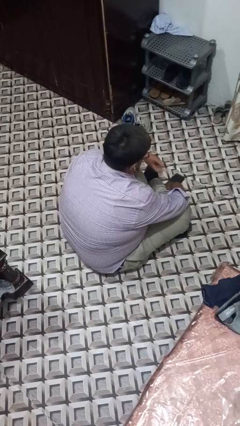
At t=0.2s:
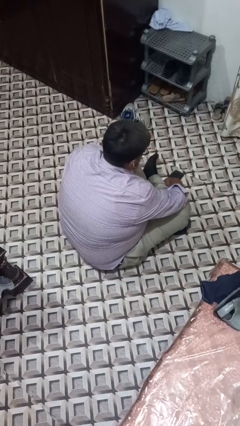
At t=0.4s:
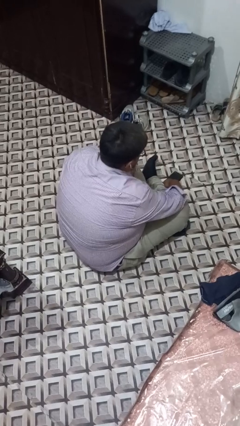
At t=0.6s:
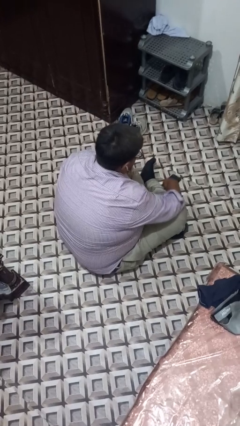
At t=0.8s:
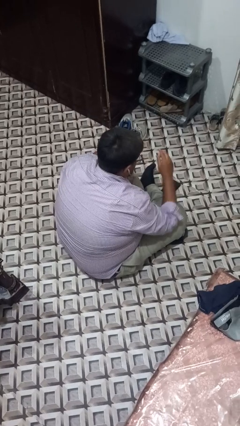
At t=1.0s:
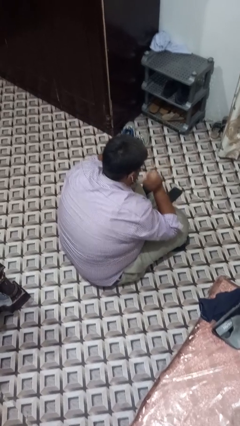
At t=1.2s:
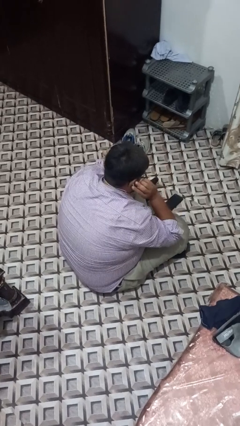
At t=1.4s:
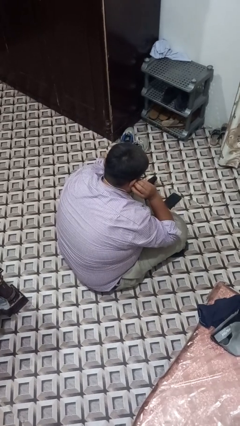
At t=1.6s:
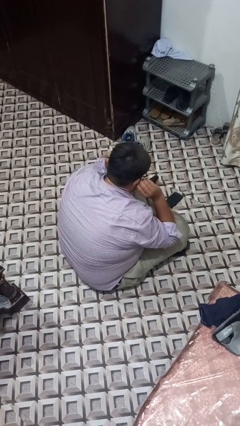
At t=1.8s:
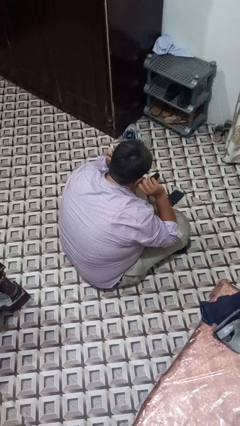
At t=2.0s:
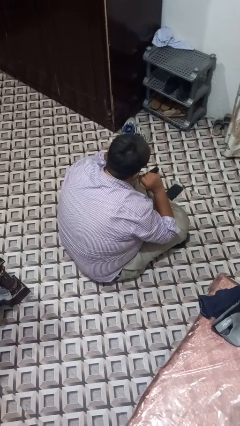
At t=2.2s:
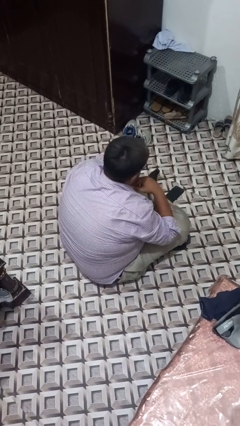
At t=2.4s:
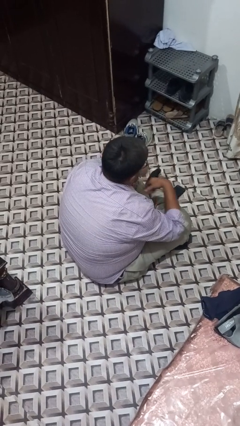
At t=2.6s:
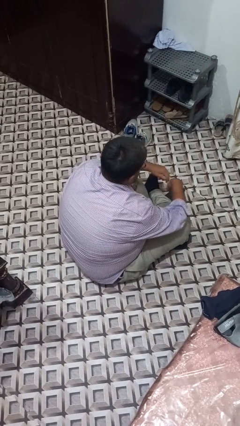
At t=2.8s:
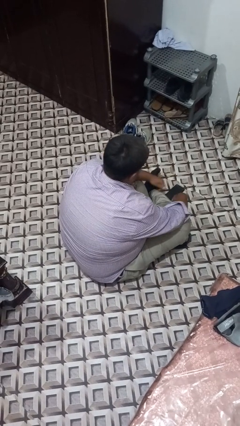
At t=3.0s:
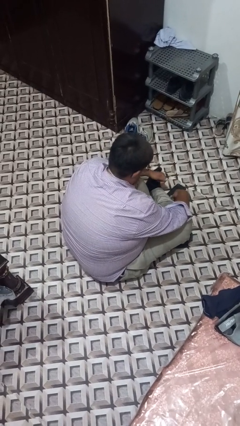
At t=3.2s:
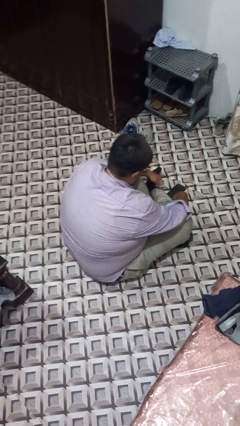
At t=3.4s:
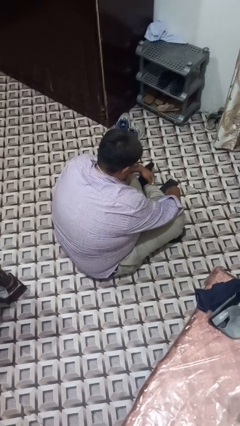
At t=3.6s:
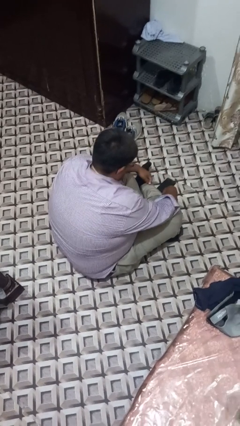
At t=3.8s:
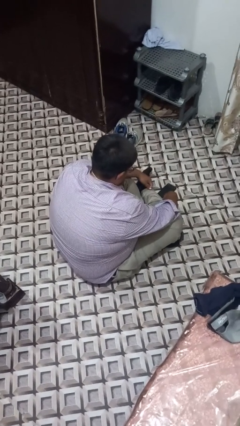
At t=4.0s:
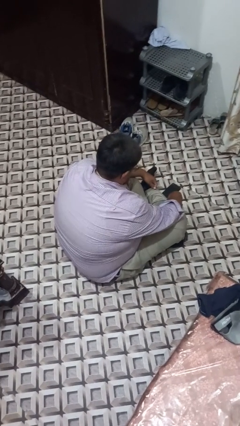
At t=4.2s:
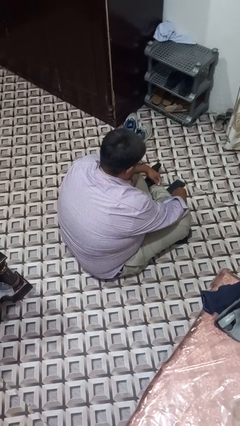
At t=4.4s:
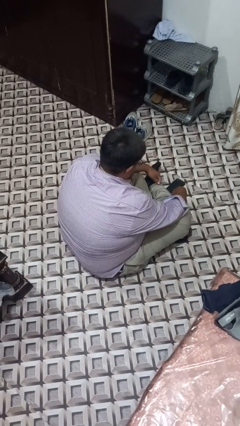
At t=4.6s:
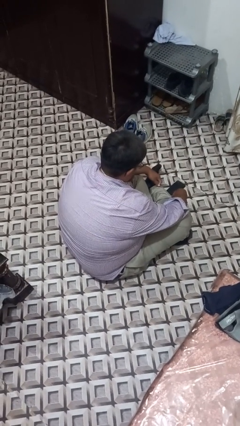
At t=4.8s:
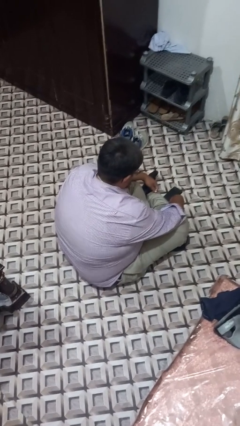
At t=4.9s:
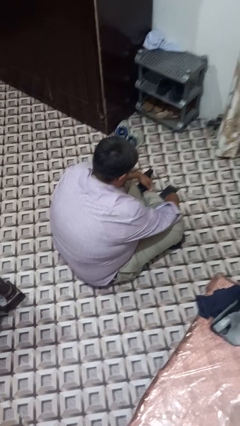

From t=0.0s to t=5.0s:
person takes off headphones

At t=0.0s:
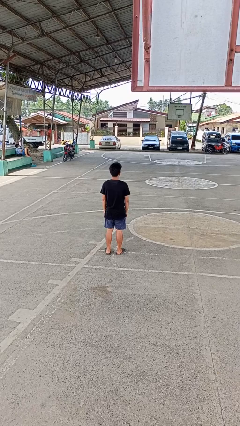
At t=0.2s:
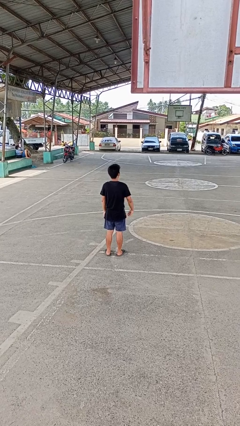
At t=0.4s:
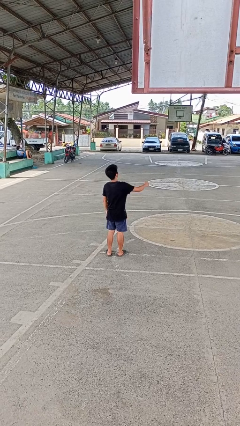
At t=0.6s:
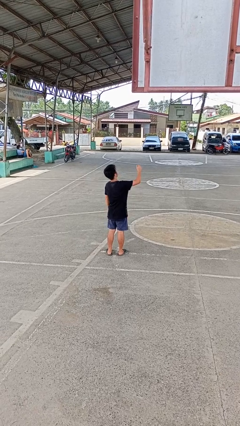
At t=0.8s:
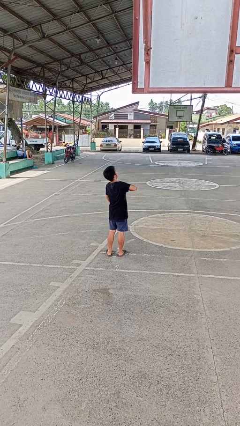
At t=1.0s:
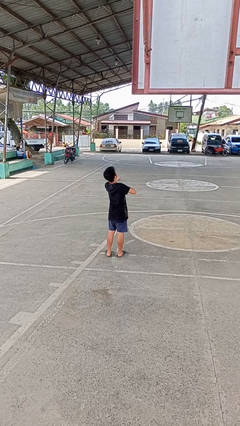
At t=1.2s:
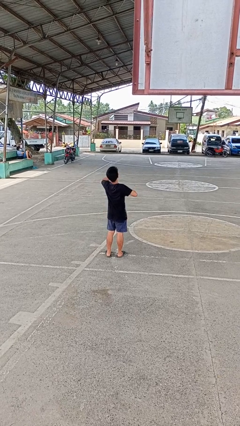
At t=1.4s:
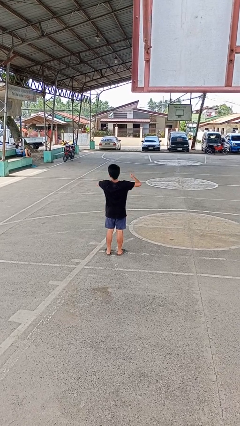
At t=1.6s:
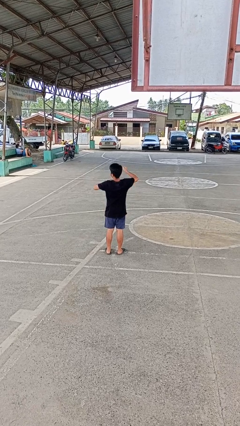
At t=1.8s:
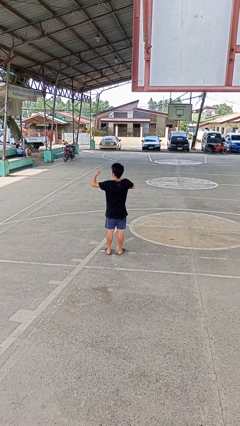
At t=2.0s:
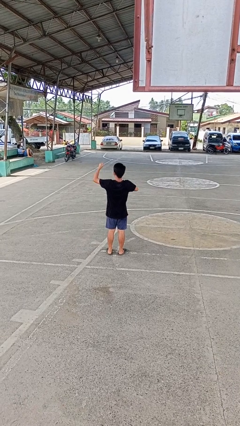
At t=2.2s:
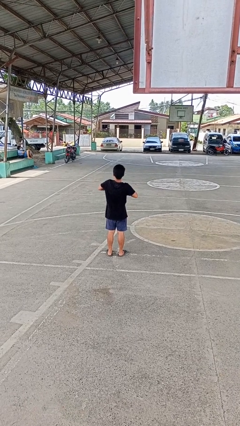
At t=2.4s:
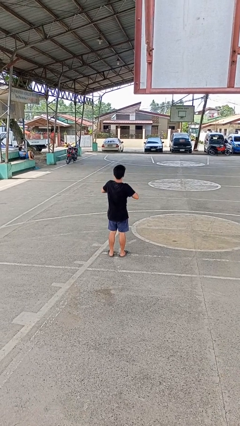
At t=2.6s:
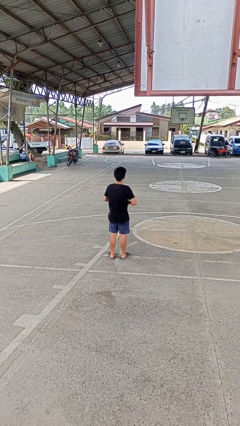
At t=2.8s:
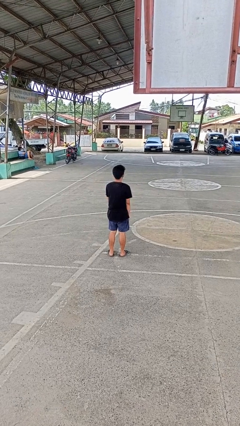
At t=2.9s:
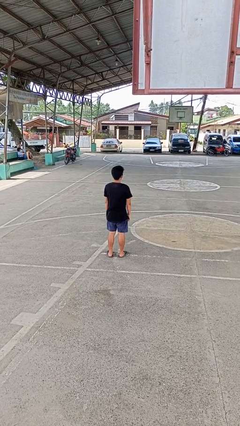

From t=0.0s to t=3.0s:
person drums on chest

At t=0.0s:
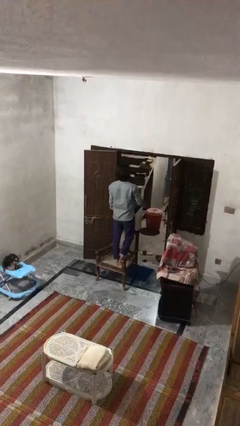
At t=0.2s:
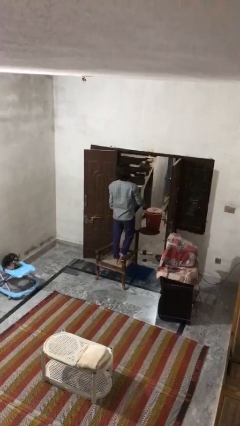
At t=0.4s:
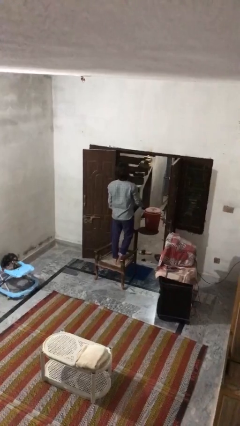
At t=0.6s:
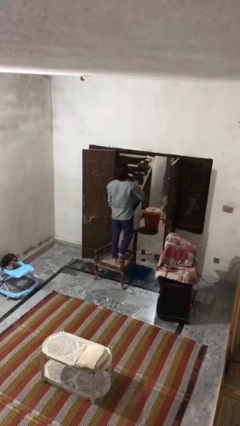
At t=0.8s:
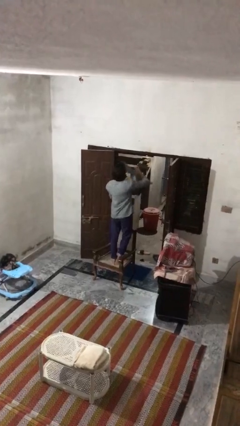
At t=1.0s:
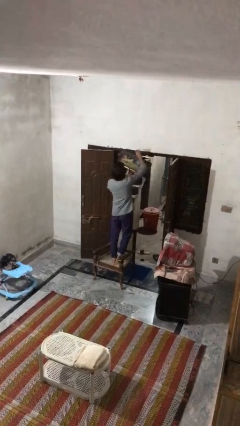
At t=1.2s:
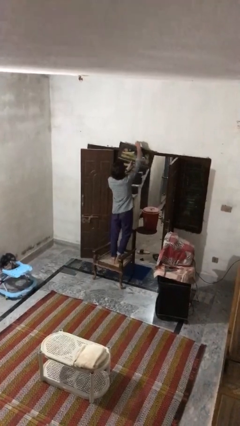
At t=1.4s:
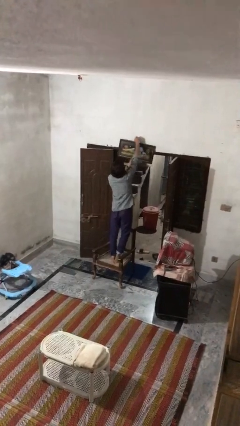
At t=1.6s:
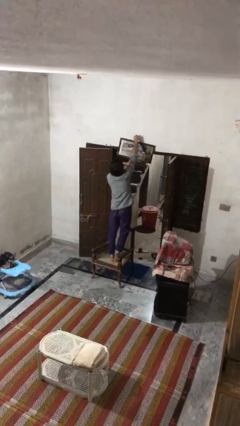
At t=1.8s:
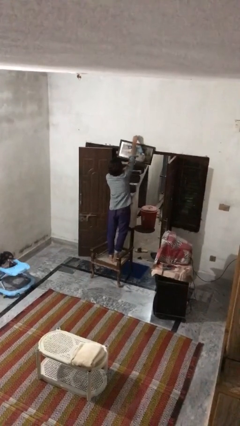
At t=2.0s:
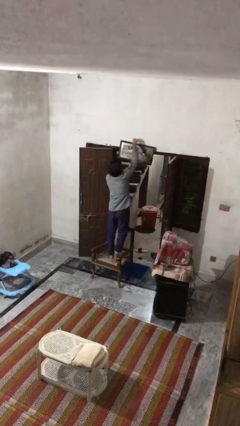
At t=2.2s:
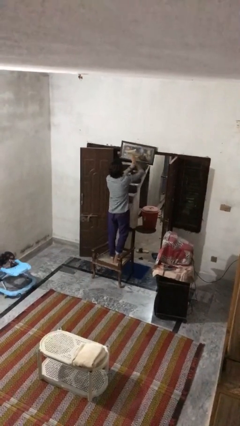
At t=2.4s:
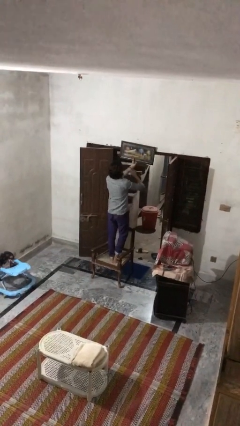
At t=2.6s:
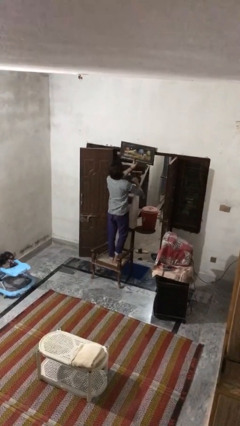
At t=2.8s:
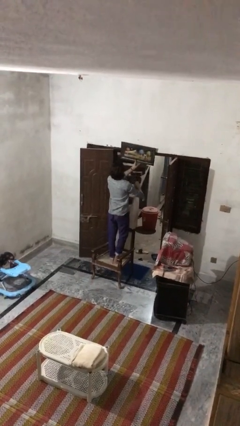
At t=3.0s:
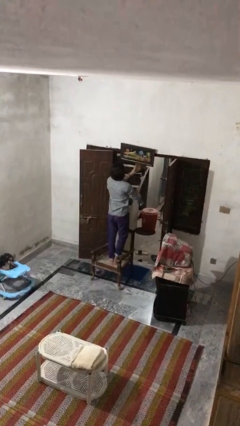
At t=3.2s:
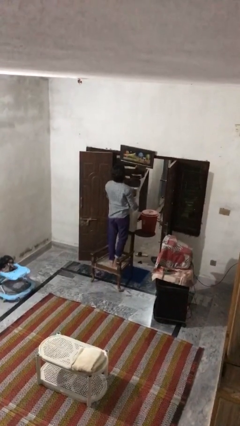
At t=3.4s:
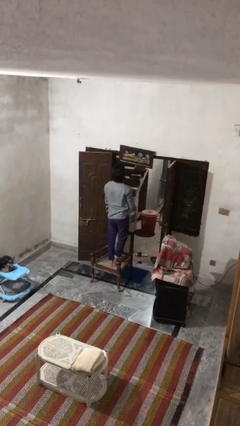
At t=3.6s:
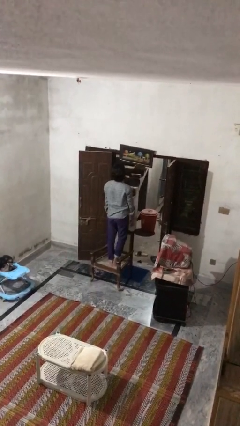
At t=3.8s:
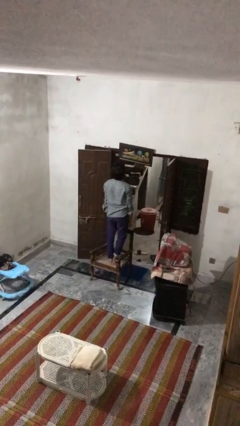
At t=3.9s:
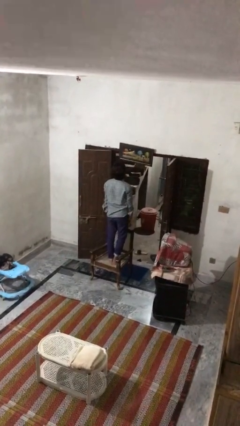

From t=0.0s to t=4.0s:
person puts up picture frame

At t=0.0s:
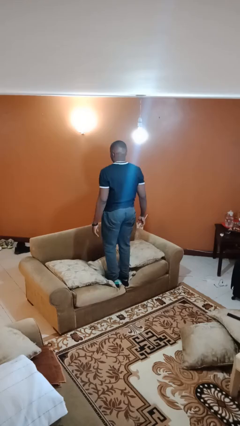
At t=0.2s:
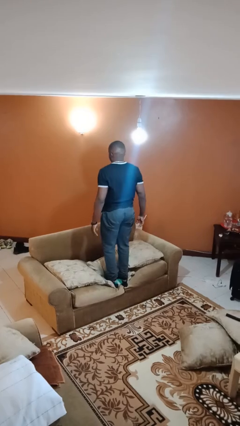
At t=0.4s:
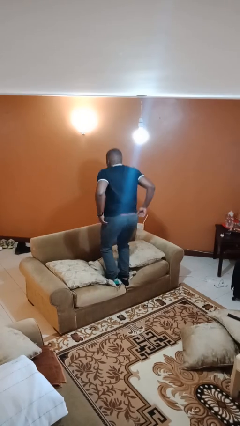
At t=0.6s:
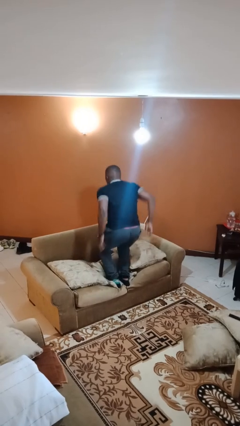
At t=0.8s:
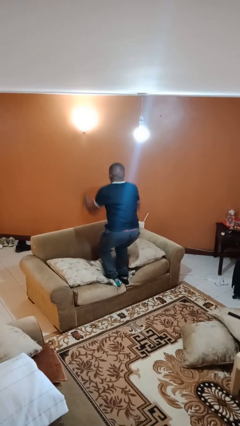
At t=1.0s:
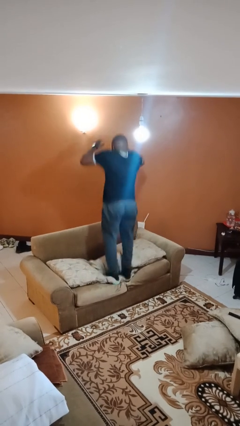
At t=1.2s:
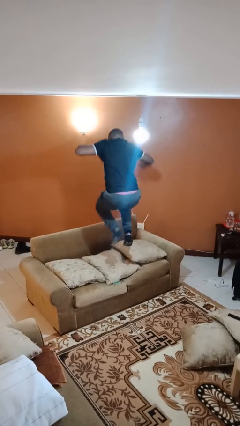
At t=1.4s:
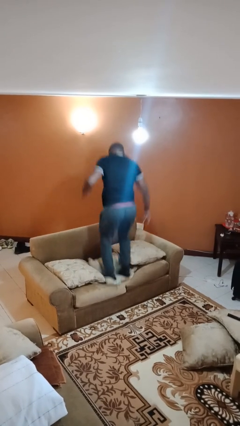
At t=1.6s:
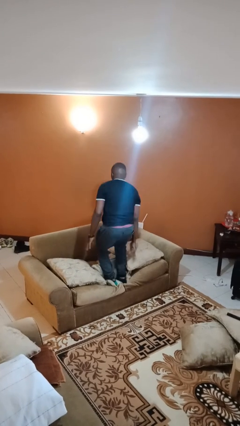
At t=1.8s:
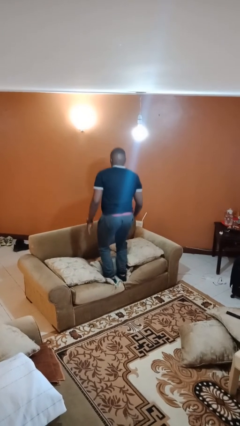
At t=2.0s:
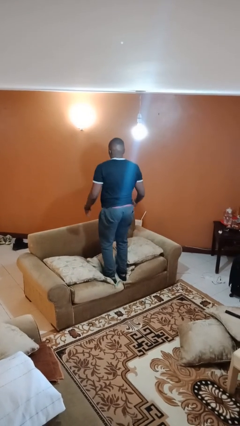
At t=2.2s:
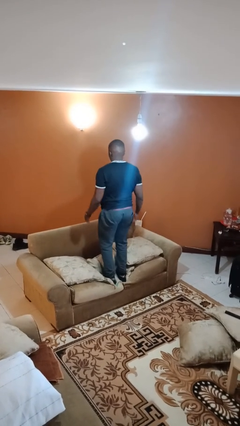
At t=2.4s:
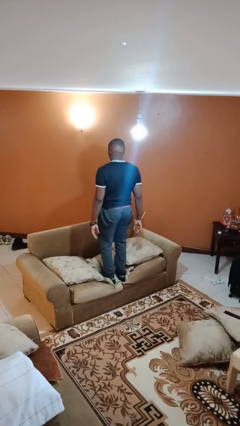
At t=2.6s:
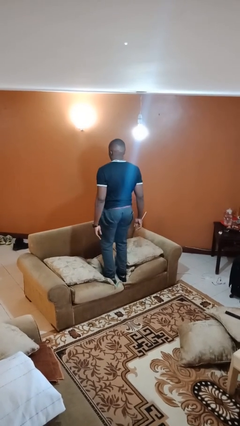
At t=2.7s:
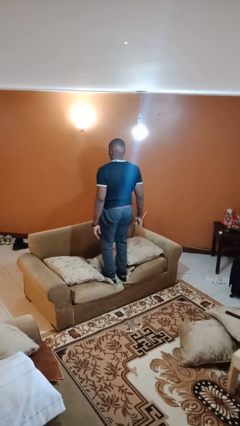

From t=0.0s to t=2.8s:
person jumps on couch

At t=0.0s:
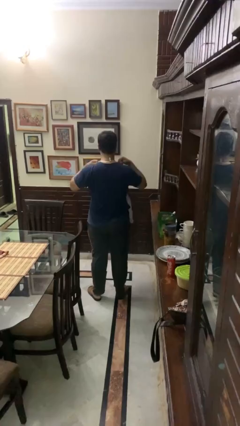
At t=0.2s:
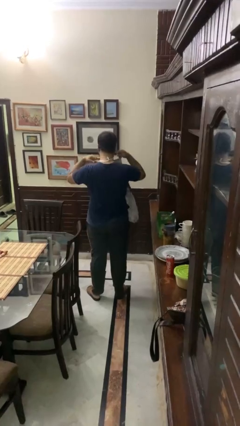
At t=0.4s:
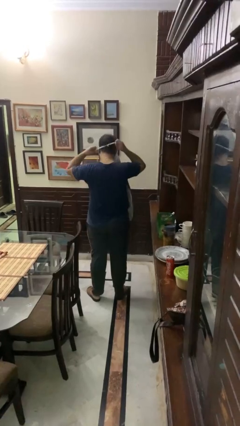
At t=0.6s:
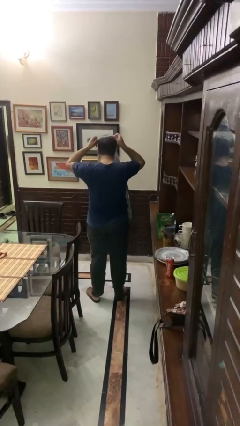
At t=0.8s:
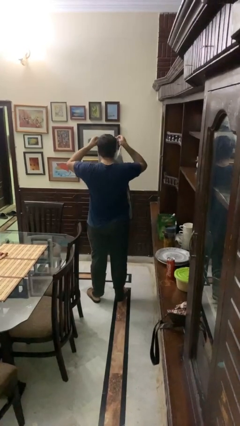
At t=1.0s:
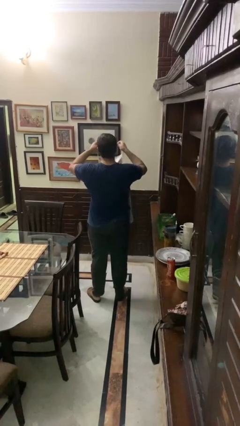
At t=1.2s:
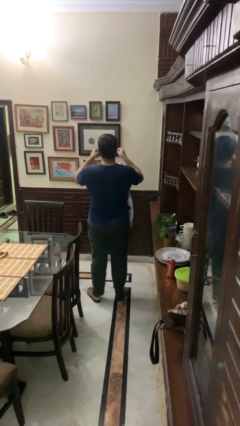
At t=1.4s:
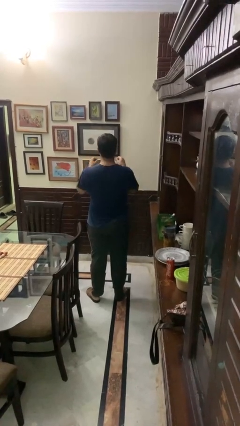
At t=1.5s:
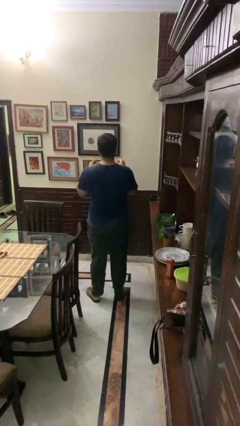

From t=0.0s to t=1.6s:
person takes off apron

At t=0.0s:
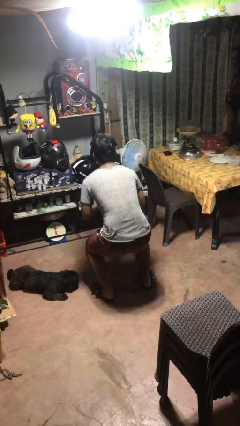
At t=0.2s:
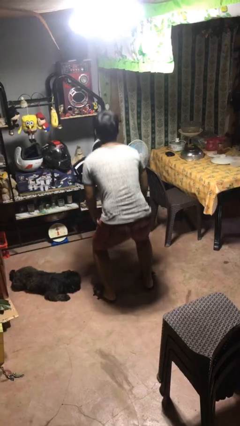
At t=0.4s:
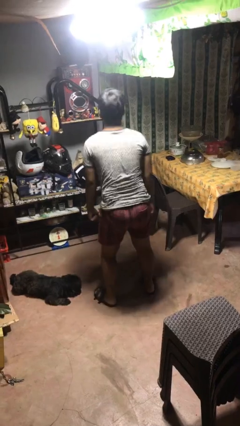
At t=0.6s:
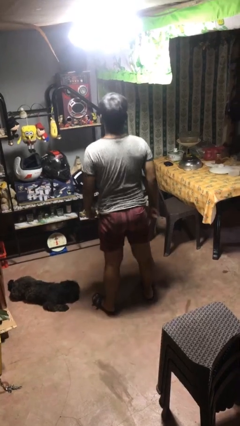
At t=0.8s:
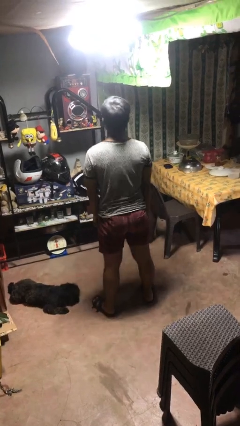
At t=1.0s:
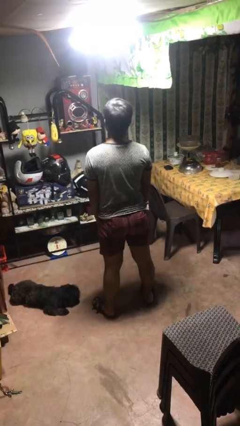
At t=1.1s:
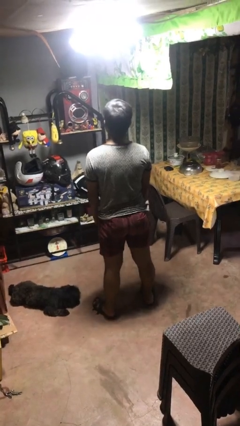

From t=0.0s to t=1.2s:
person stands up
